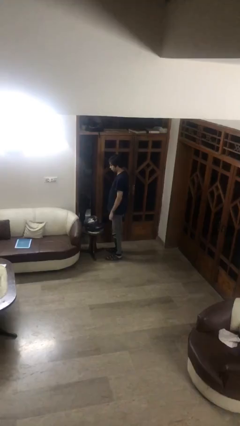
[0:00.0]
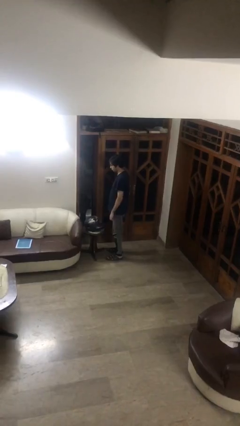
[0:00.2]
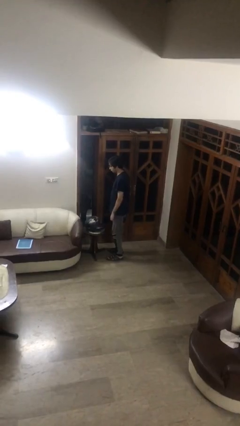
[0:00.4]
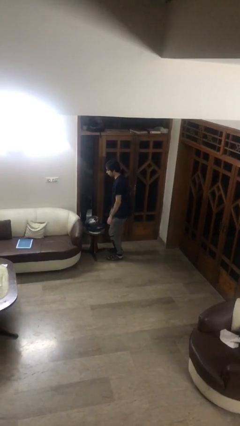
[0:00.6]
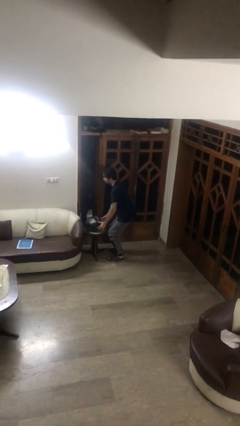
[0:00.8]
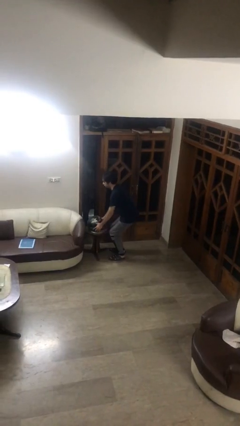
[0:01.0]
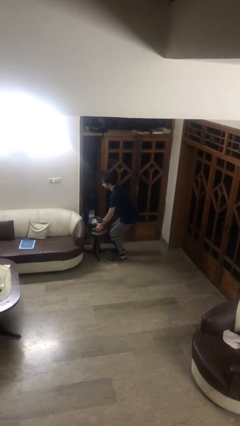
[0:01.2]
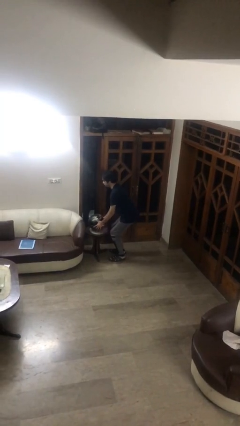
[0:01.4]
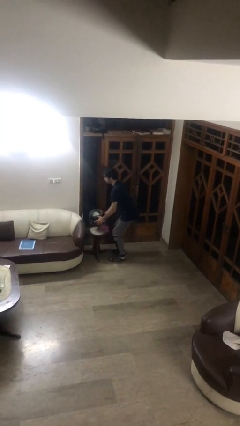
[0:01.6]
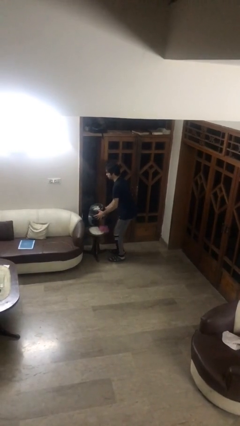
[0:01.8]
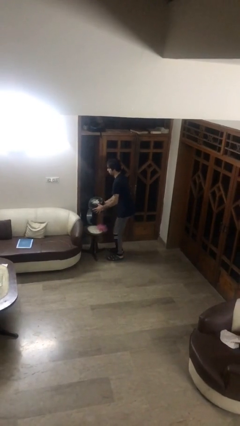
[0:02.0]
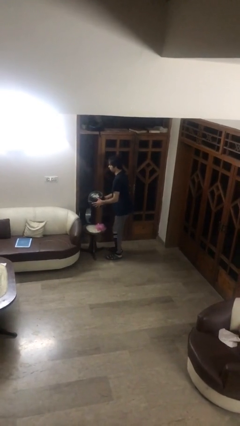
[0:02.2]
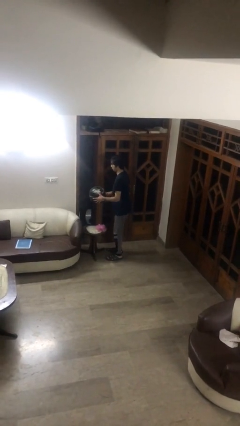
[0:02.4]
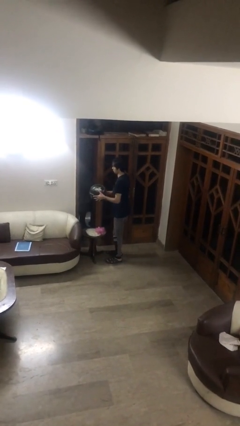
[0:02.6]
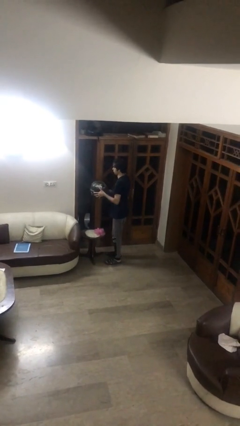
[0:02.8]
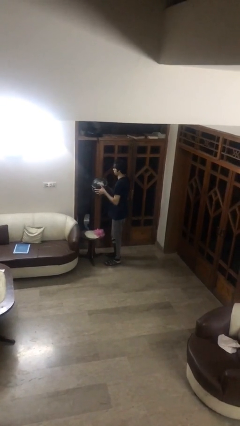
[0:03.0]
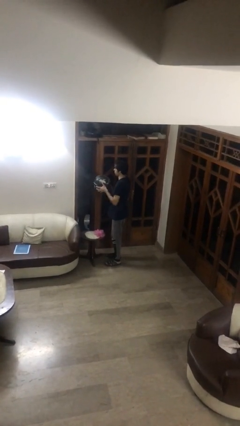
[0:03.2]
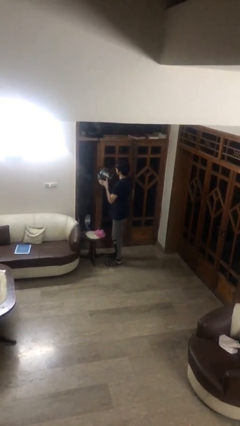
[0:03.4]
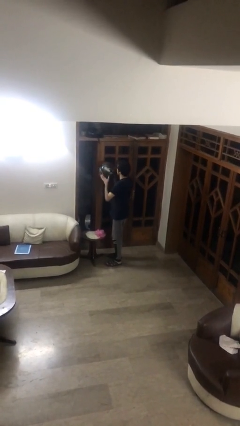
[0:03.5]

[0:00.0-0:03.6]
person picks up object from table

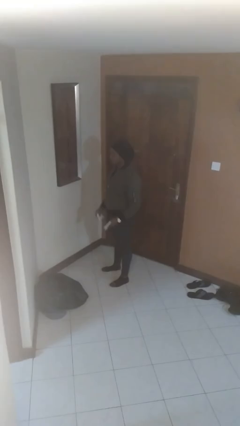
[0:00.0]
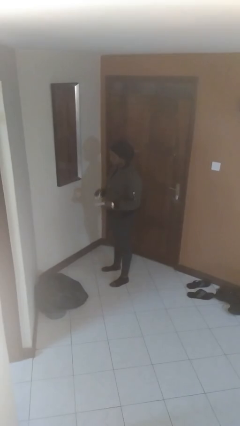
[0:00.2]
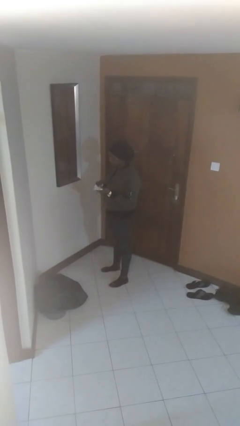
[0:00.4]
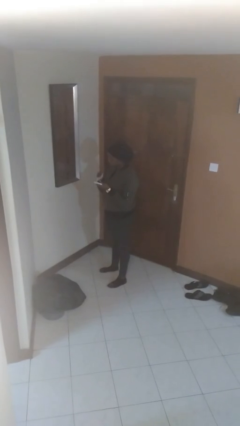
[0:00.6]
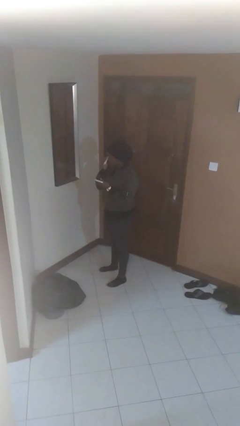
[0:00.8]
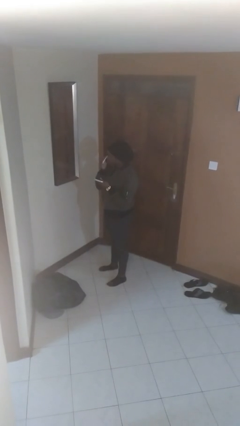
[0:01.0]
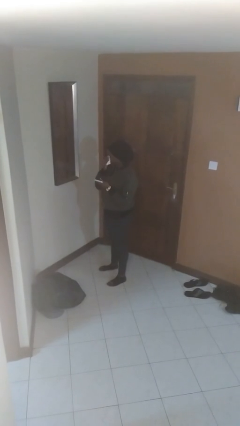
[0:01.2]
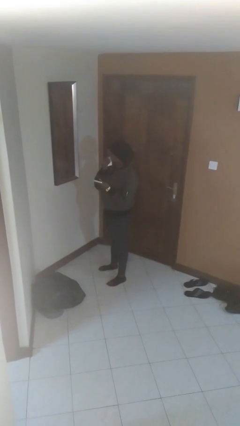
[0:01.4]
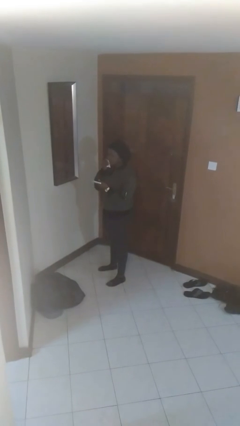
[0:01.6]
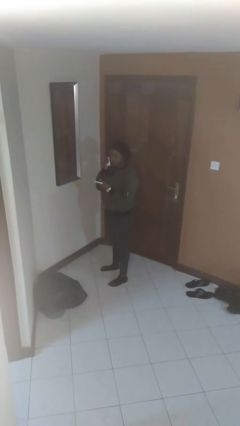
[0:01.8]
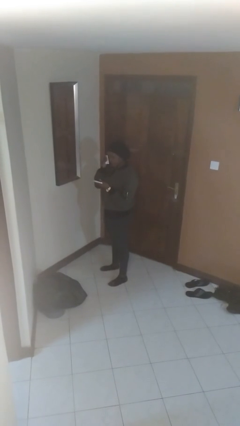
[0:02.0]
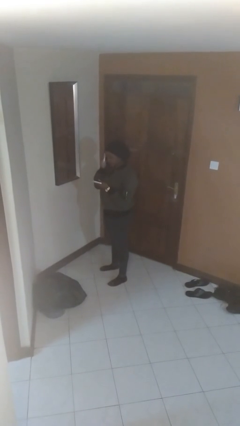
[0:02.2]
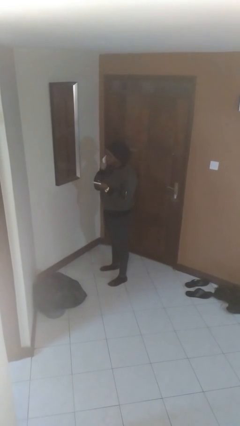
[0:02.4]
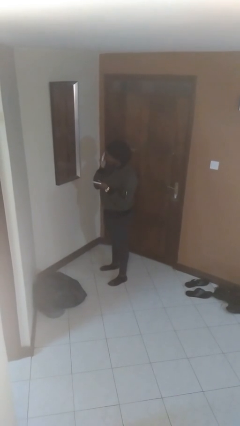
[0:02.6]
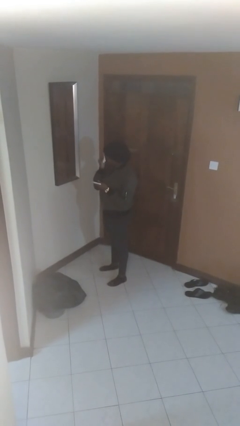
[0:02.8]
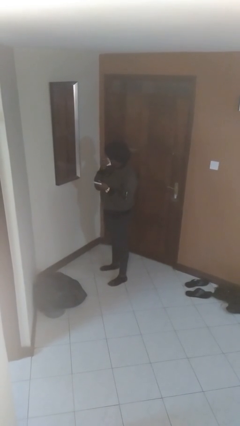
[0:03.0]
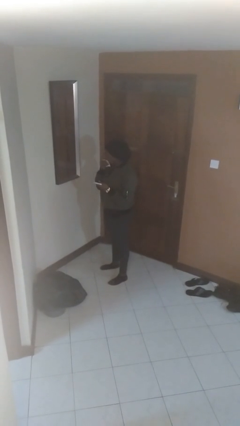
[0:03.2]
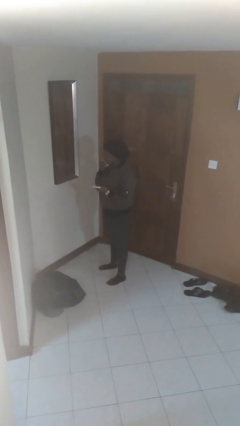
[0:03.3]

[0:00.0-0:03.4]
person applies foundation makeup

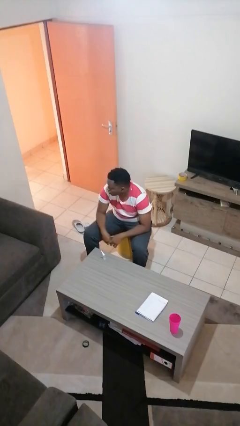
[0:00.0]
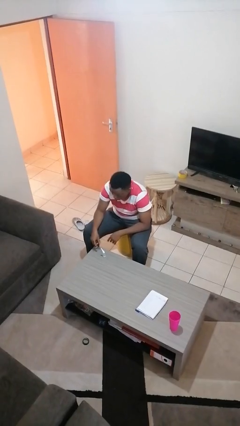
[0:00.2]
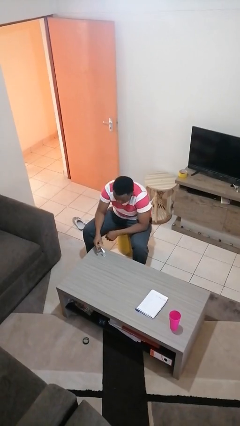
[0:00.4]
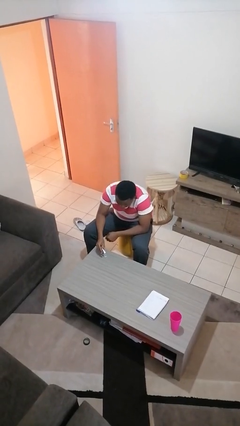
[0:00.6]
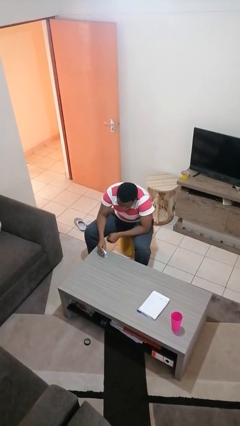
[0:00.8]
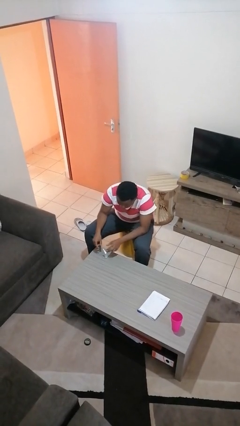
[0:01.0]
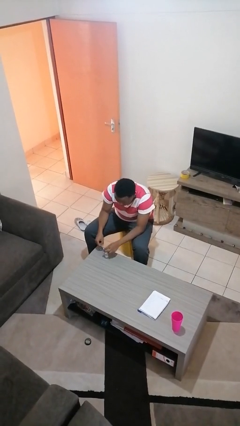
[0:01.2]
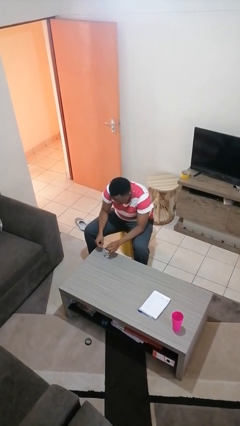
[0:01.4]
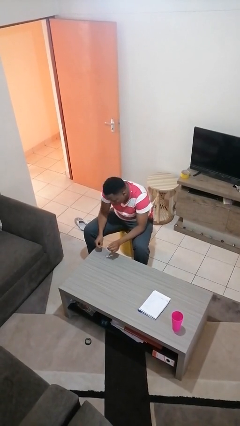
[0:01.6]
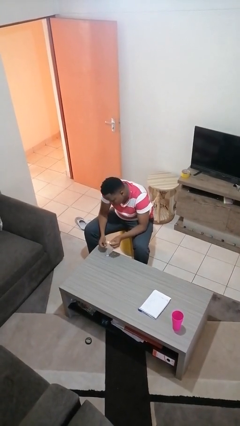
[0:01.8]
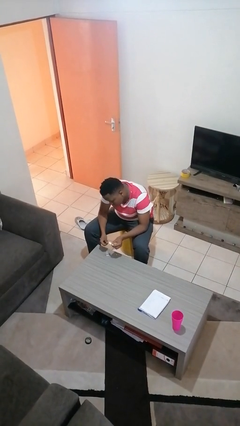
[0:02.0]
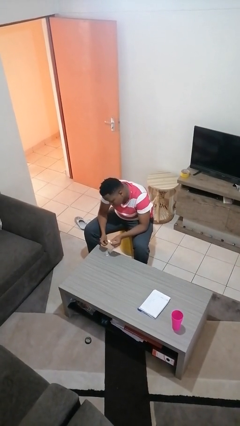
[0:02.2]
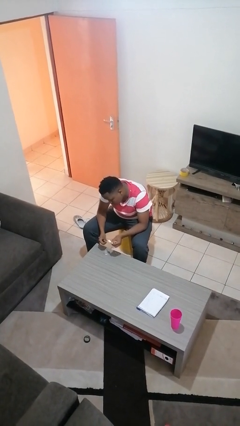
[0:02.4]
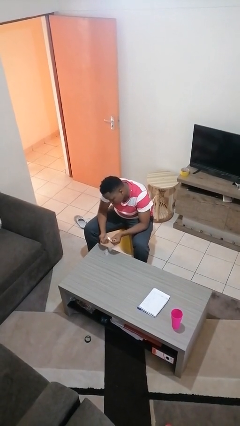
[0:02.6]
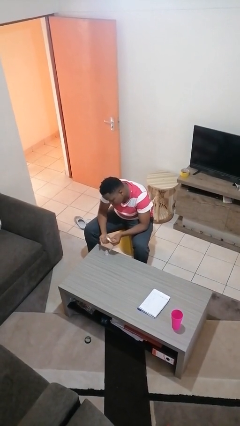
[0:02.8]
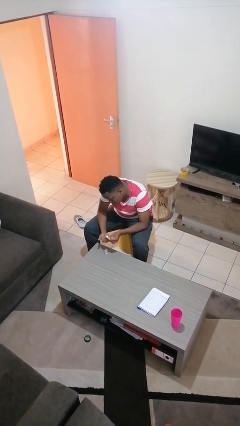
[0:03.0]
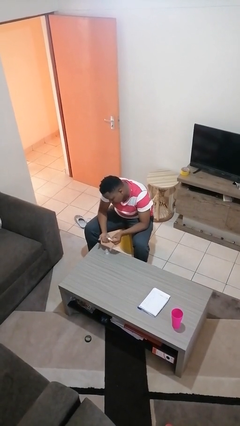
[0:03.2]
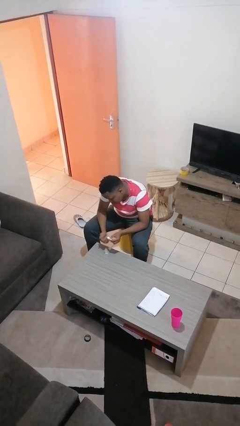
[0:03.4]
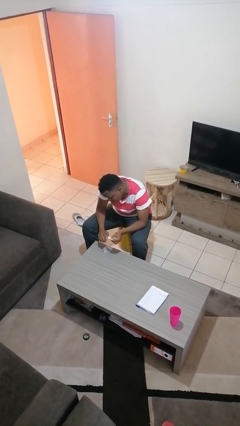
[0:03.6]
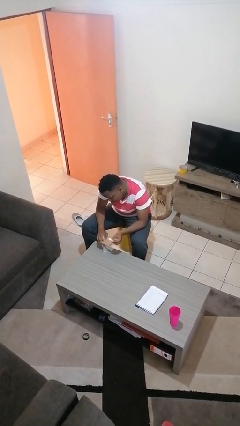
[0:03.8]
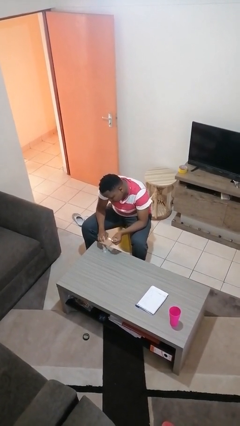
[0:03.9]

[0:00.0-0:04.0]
person paints fingernails

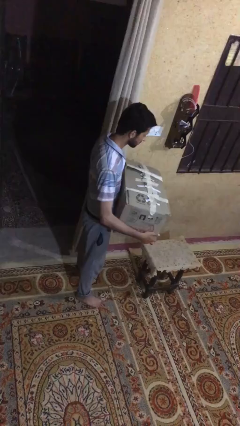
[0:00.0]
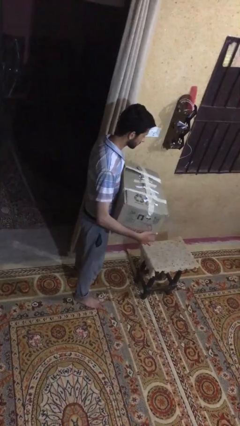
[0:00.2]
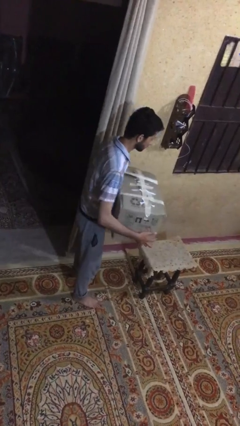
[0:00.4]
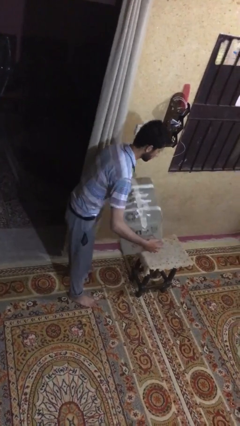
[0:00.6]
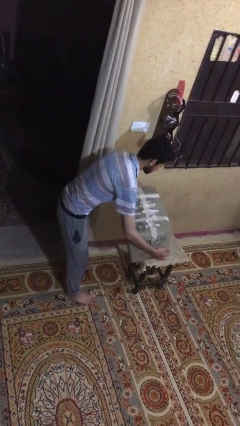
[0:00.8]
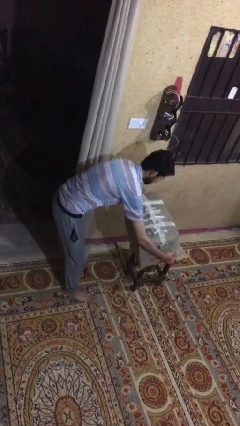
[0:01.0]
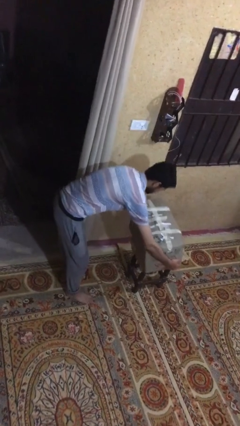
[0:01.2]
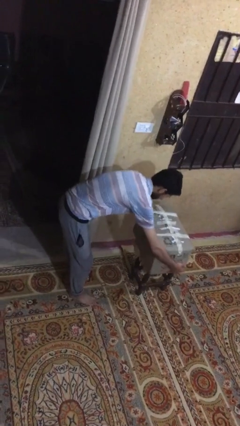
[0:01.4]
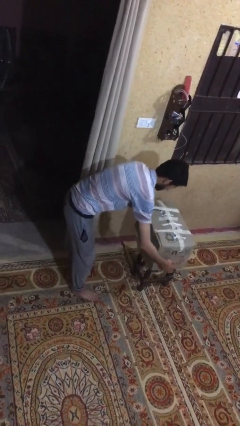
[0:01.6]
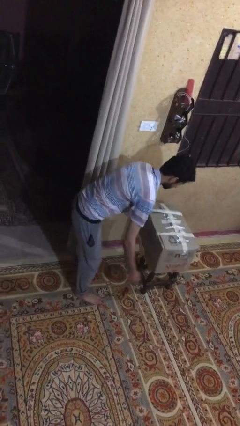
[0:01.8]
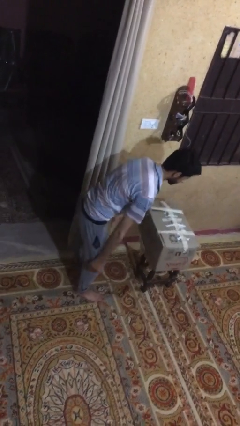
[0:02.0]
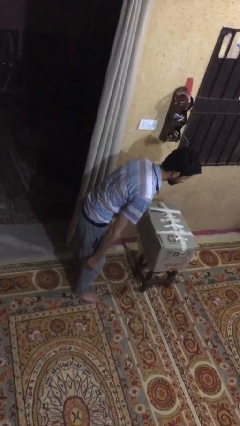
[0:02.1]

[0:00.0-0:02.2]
person puts down object on table

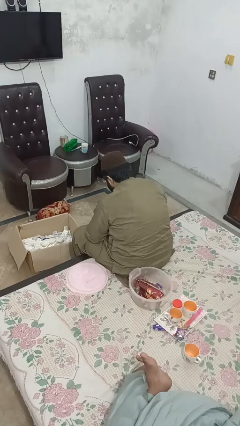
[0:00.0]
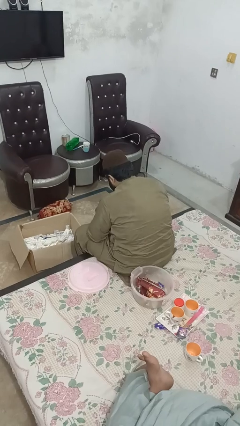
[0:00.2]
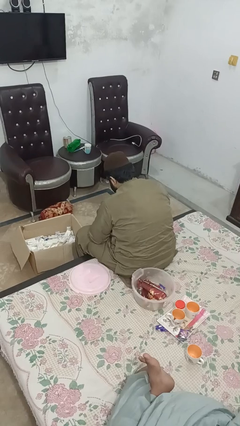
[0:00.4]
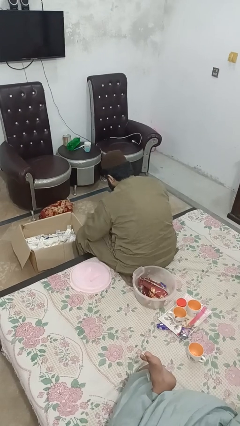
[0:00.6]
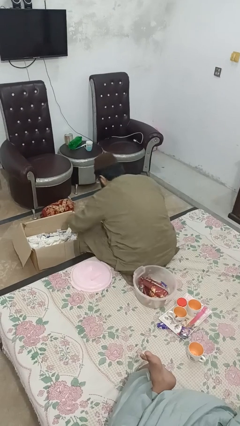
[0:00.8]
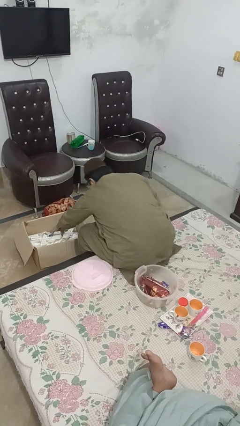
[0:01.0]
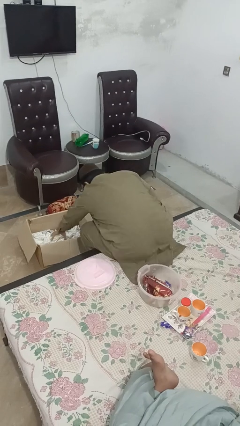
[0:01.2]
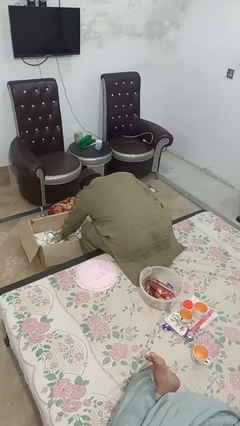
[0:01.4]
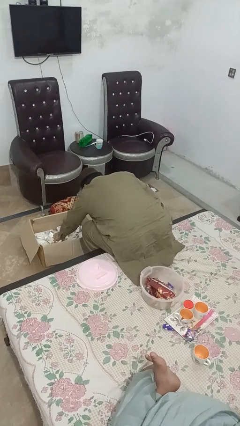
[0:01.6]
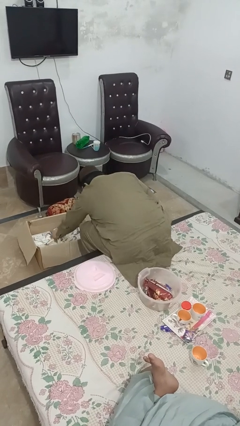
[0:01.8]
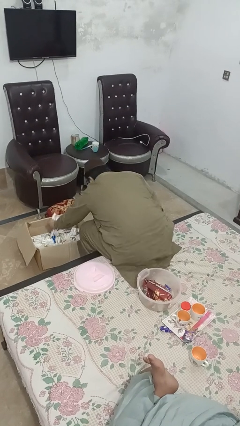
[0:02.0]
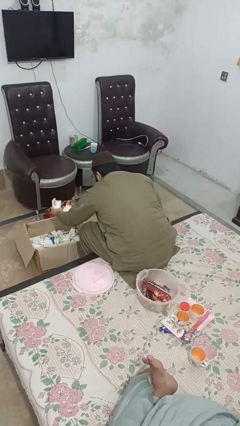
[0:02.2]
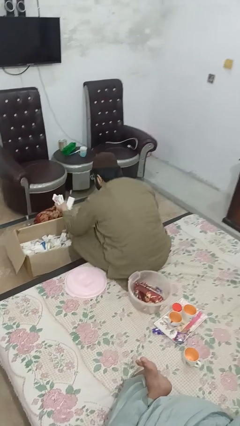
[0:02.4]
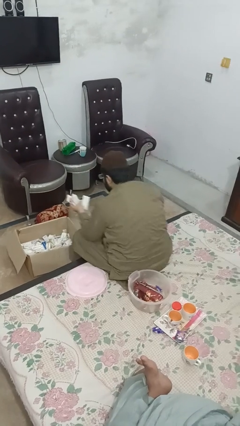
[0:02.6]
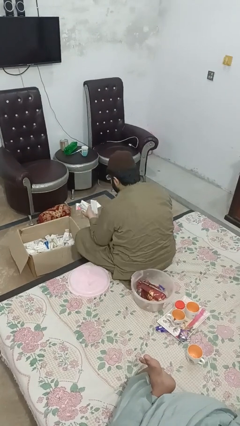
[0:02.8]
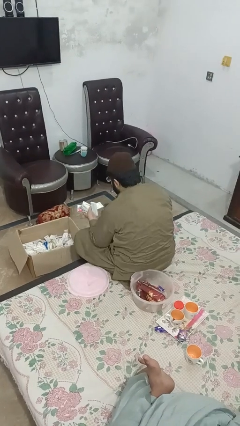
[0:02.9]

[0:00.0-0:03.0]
person takes object from box

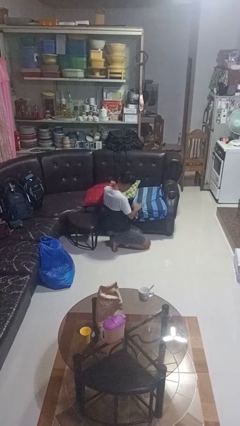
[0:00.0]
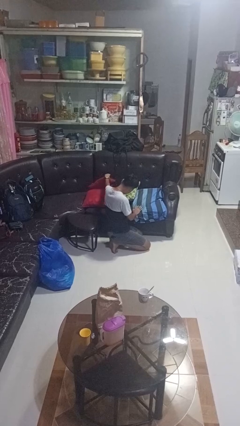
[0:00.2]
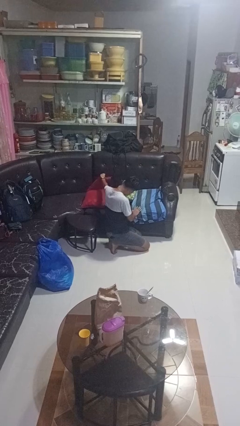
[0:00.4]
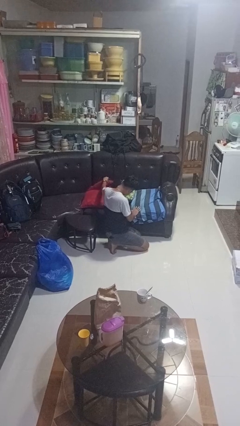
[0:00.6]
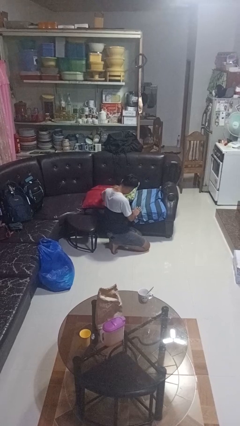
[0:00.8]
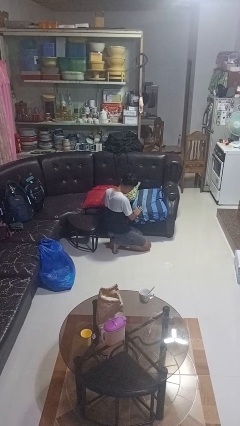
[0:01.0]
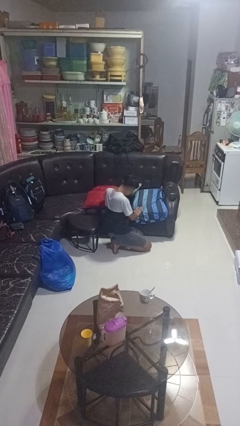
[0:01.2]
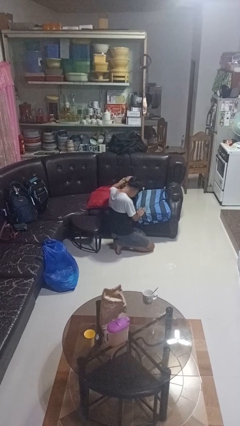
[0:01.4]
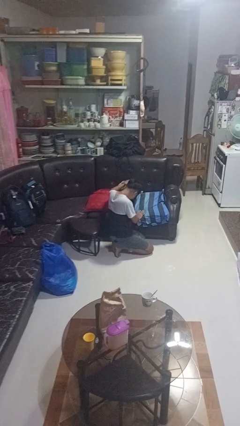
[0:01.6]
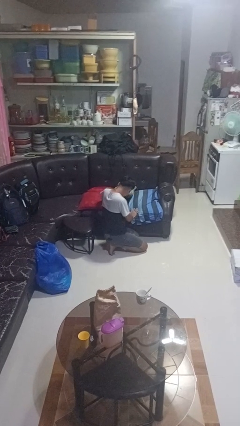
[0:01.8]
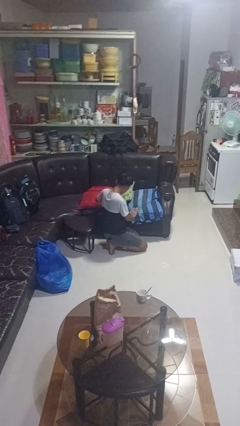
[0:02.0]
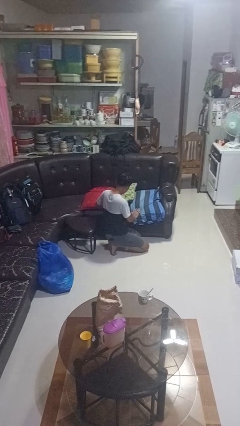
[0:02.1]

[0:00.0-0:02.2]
person searches in couch
